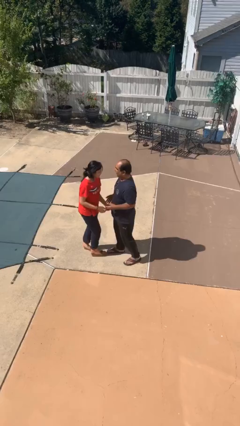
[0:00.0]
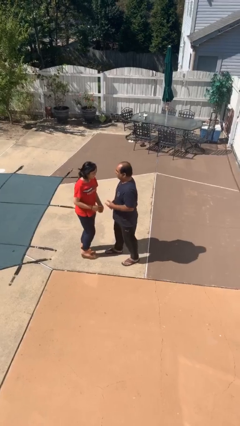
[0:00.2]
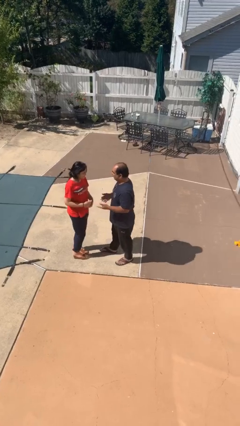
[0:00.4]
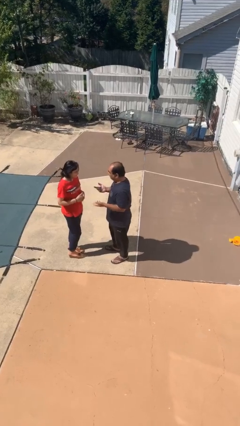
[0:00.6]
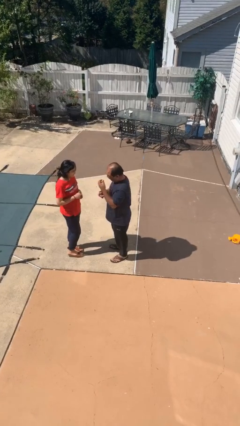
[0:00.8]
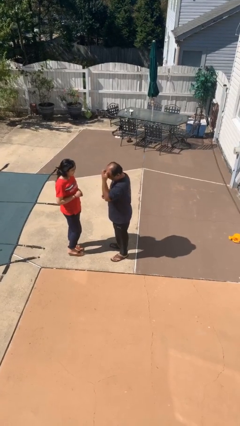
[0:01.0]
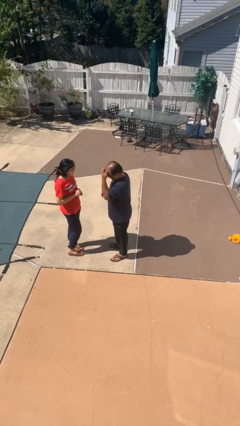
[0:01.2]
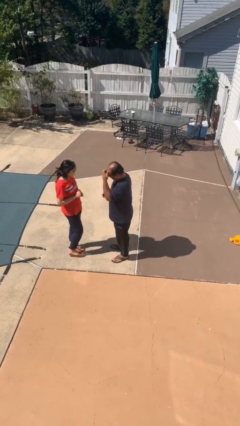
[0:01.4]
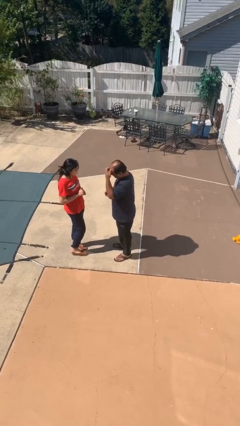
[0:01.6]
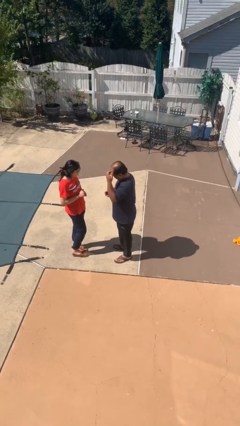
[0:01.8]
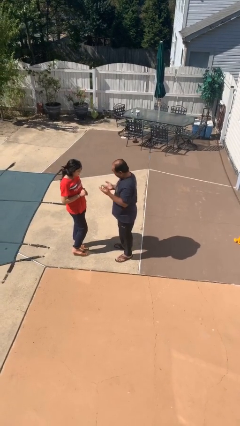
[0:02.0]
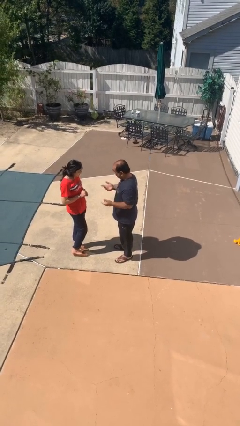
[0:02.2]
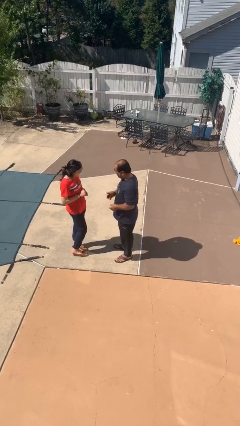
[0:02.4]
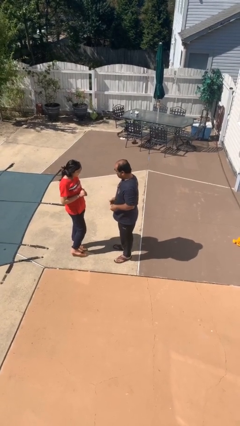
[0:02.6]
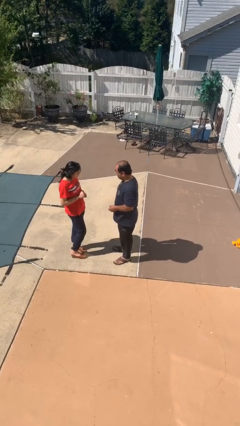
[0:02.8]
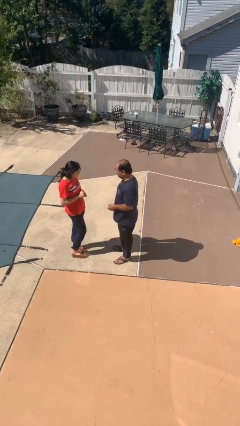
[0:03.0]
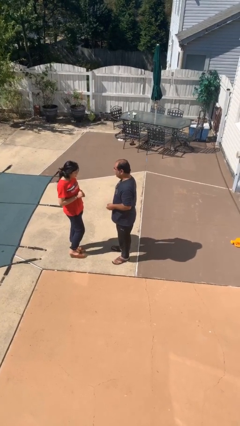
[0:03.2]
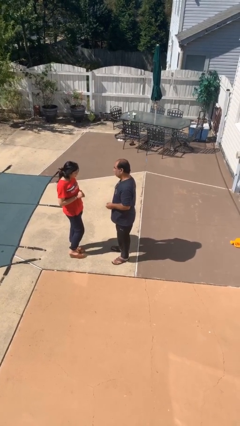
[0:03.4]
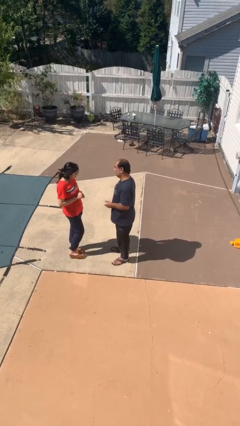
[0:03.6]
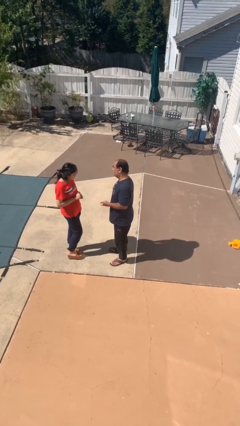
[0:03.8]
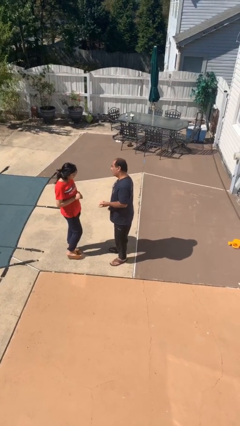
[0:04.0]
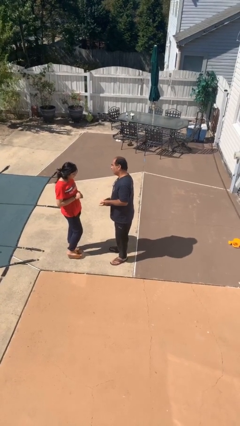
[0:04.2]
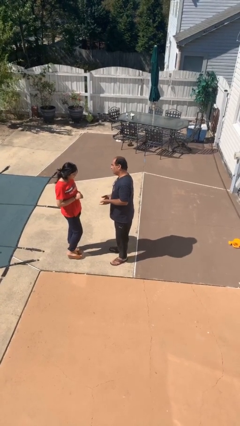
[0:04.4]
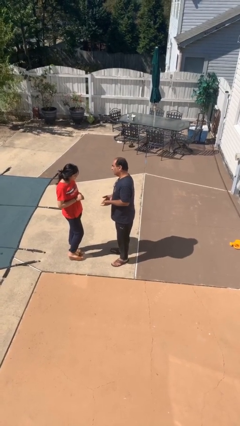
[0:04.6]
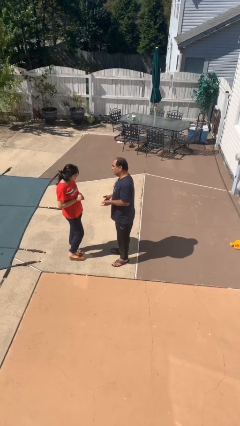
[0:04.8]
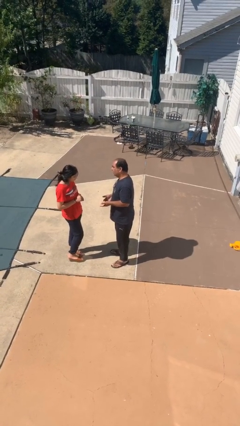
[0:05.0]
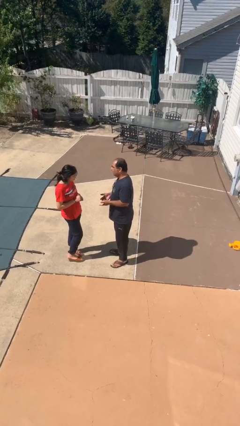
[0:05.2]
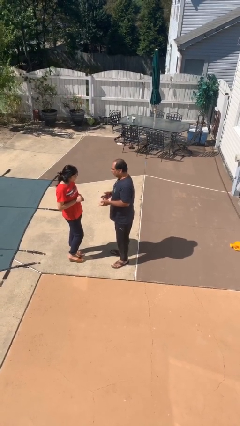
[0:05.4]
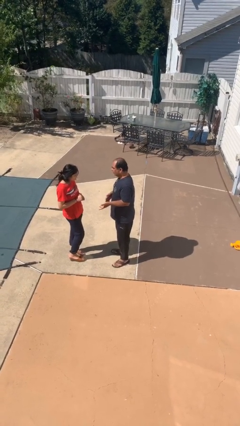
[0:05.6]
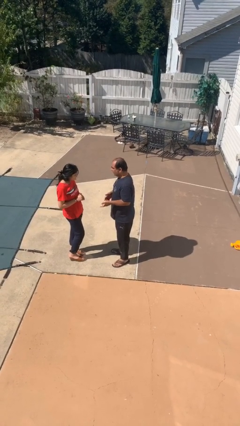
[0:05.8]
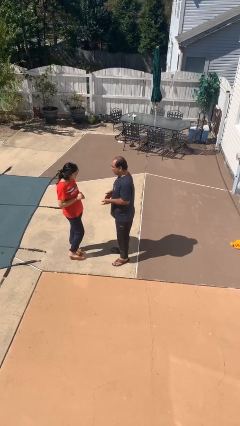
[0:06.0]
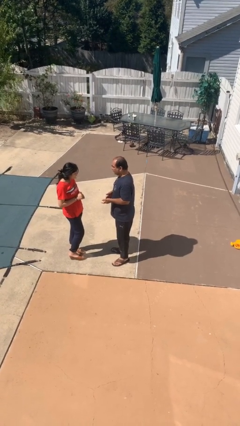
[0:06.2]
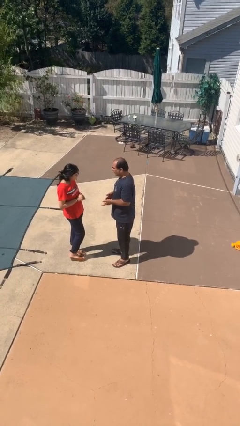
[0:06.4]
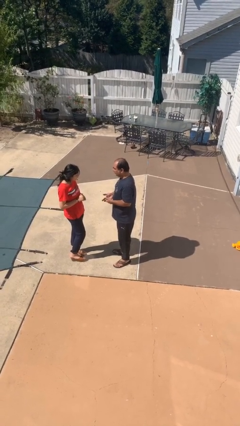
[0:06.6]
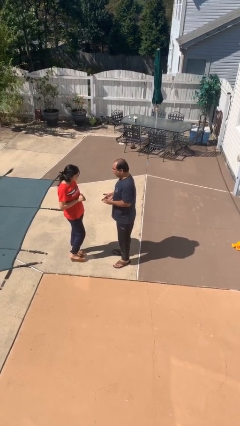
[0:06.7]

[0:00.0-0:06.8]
person talks to person

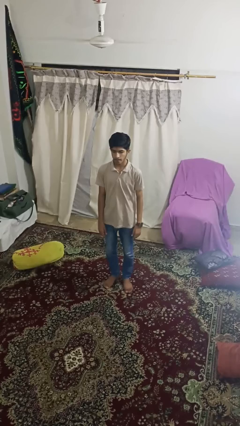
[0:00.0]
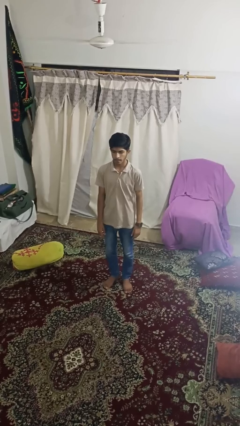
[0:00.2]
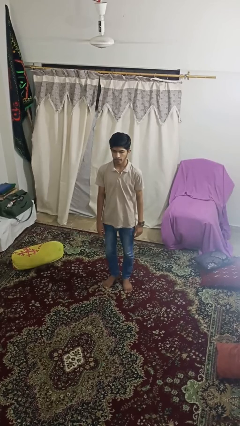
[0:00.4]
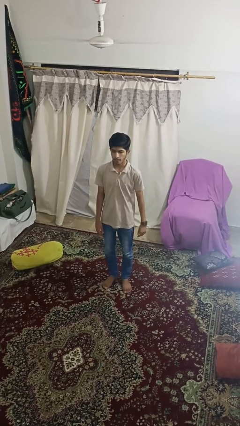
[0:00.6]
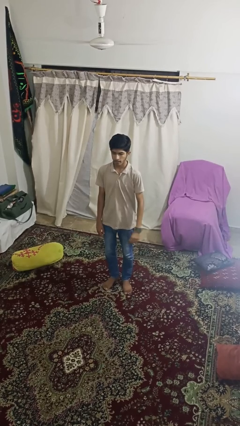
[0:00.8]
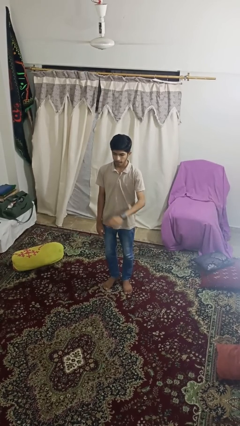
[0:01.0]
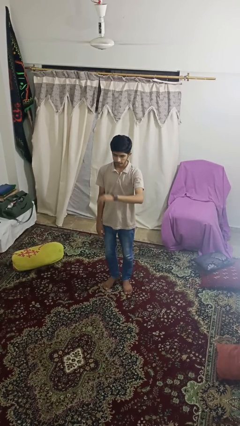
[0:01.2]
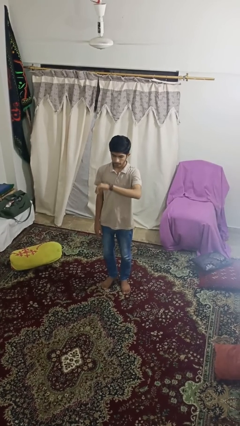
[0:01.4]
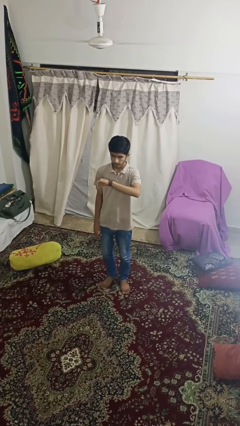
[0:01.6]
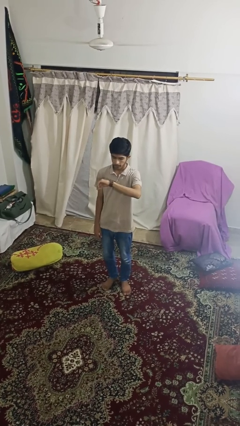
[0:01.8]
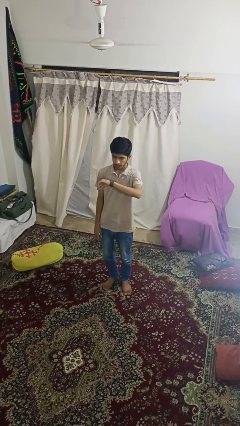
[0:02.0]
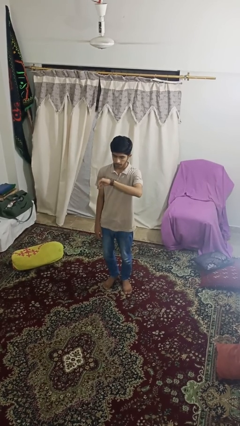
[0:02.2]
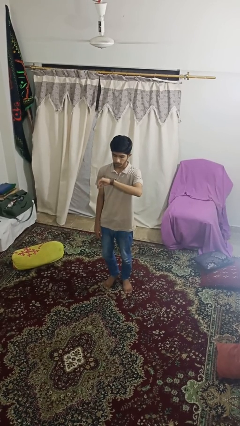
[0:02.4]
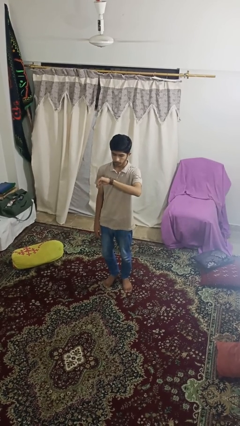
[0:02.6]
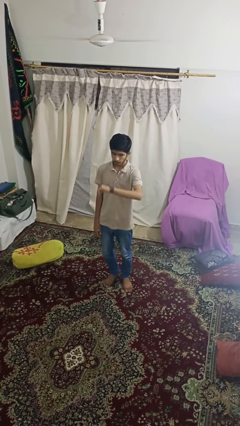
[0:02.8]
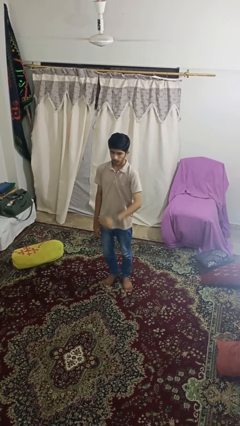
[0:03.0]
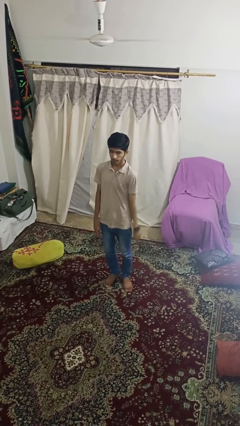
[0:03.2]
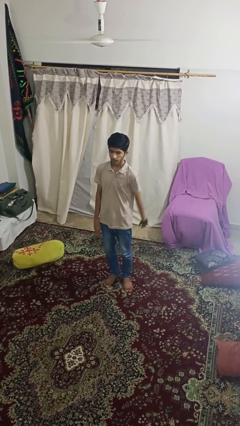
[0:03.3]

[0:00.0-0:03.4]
person looks at wristwatch

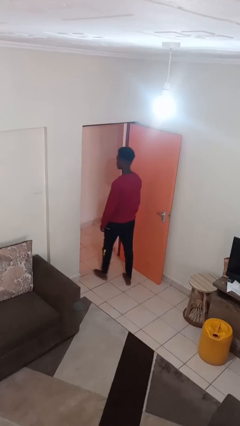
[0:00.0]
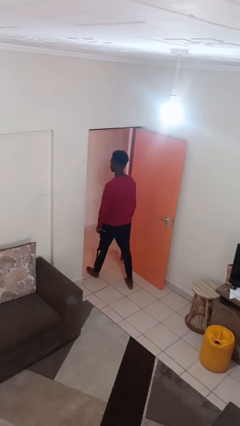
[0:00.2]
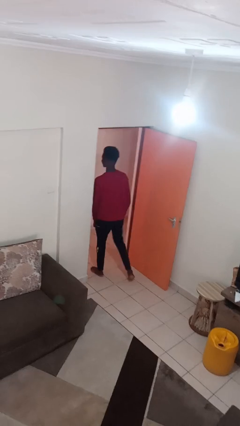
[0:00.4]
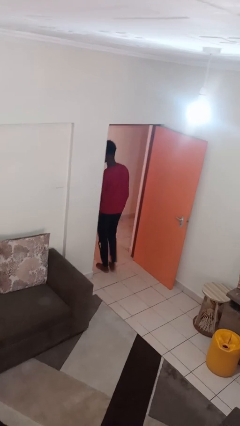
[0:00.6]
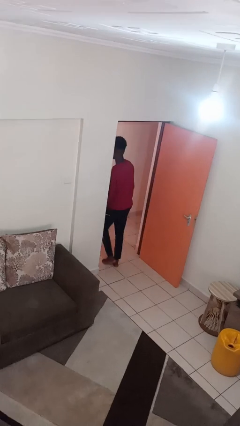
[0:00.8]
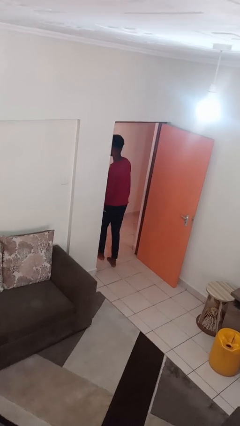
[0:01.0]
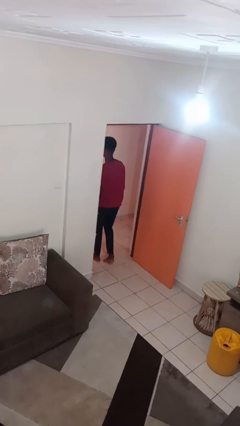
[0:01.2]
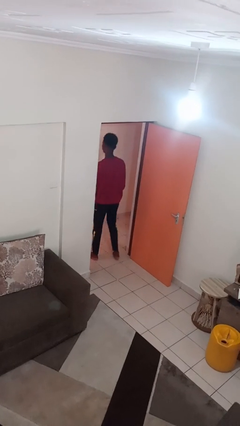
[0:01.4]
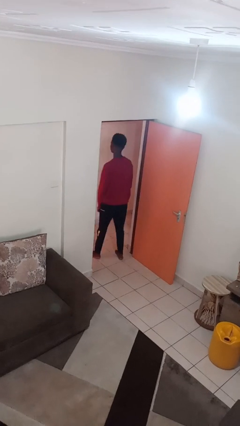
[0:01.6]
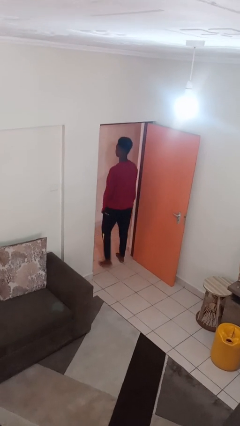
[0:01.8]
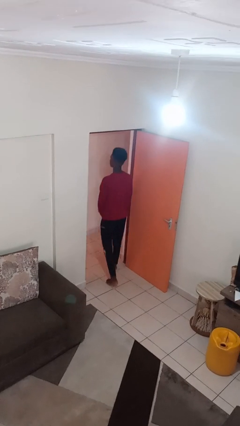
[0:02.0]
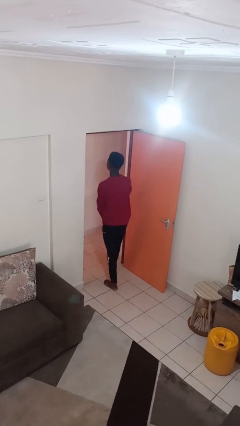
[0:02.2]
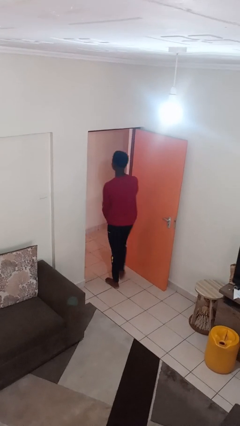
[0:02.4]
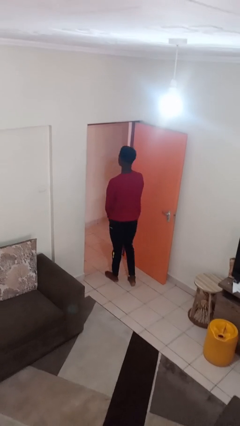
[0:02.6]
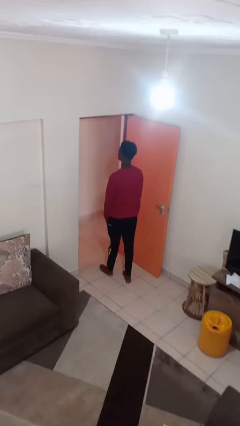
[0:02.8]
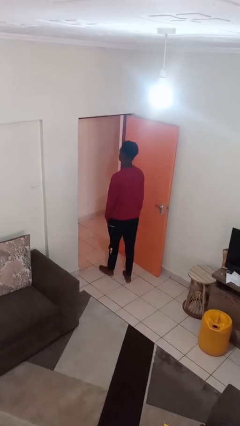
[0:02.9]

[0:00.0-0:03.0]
person bumps into wall

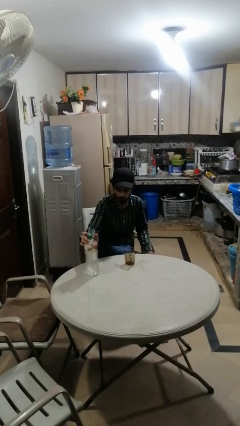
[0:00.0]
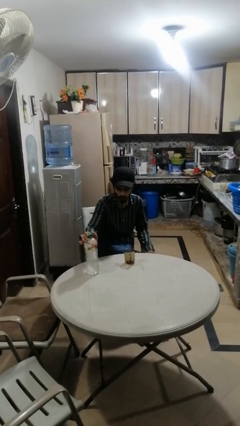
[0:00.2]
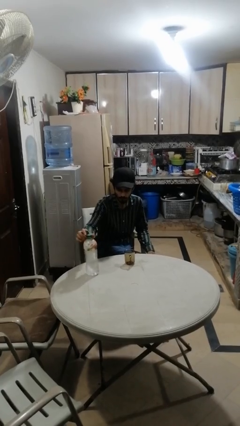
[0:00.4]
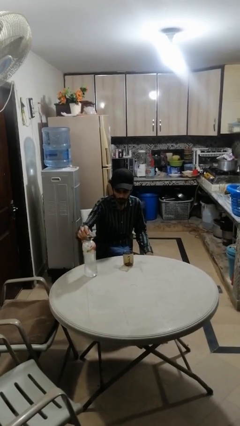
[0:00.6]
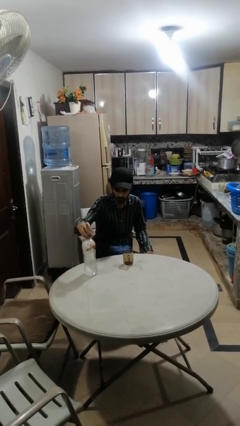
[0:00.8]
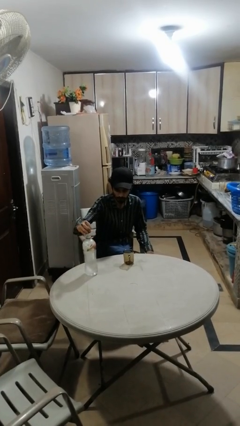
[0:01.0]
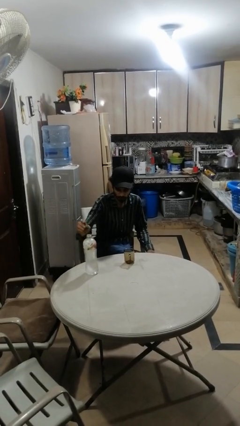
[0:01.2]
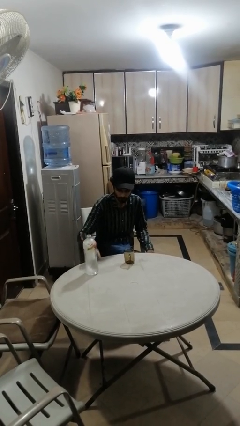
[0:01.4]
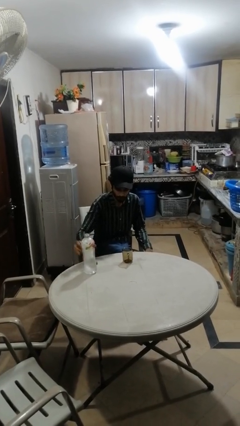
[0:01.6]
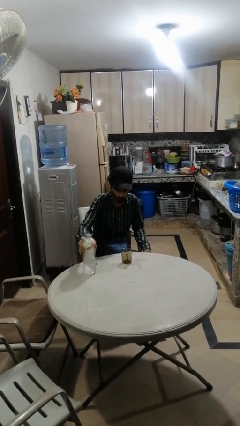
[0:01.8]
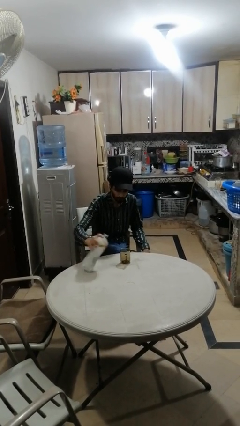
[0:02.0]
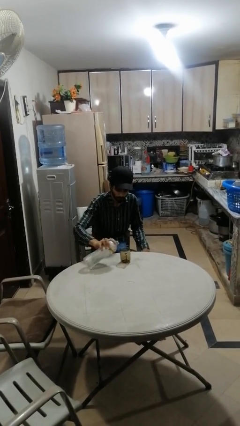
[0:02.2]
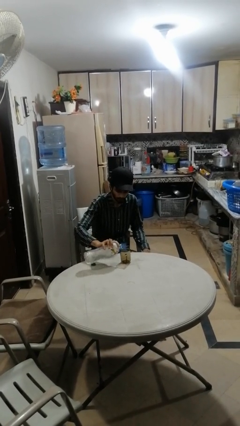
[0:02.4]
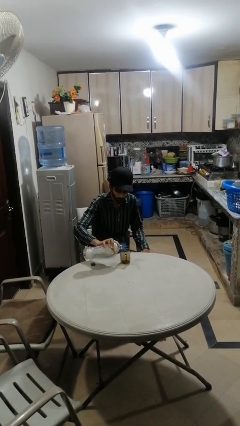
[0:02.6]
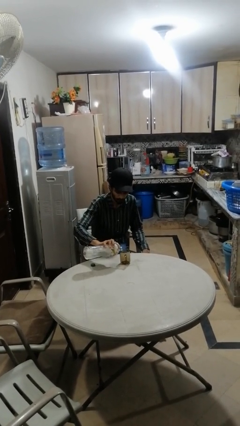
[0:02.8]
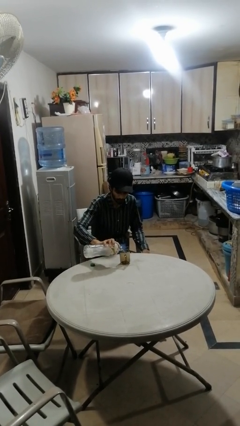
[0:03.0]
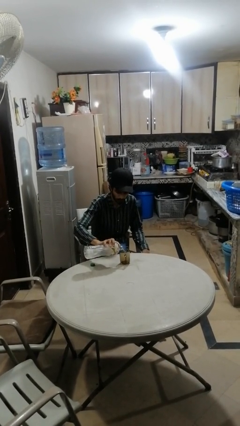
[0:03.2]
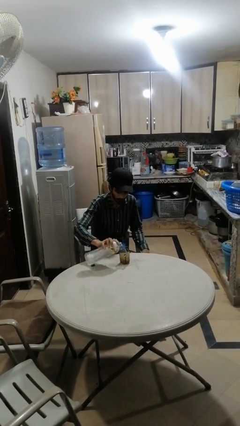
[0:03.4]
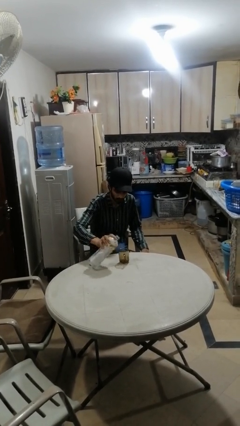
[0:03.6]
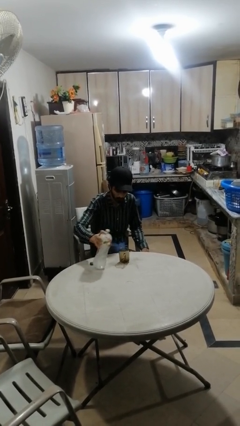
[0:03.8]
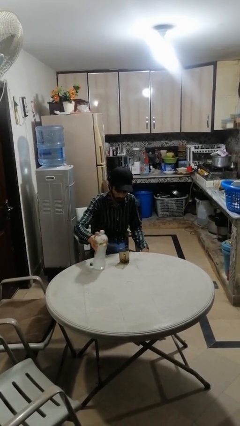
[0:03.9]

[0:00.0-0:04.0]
person pours liquid into cup
